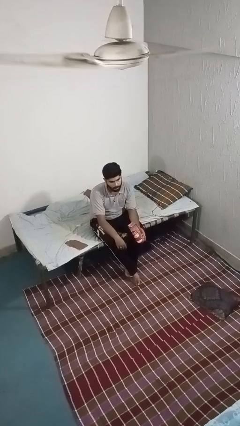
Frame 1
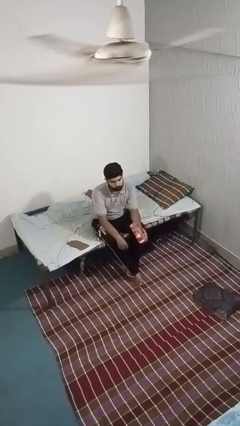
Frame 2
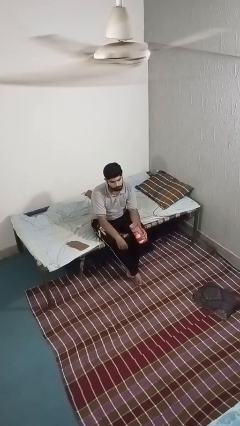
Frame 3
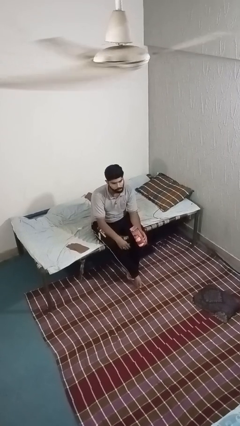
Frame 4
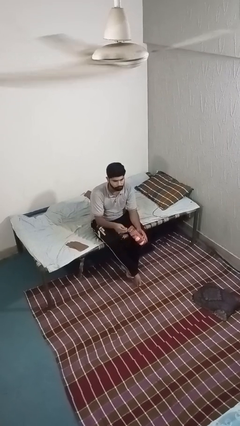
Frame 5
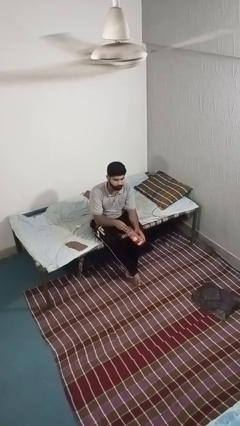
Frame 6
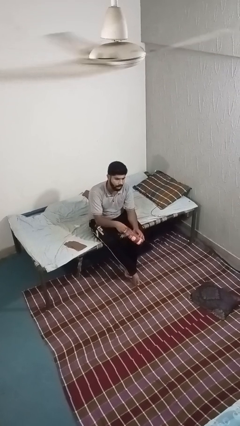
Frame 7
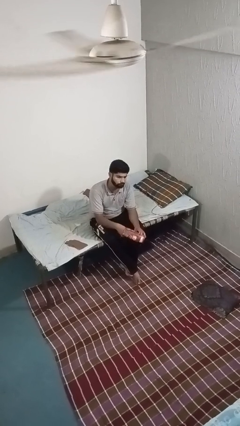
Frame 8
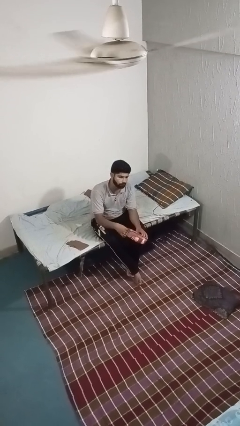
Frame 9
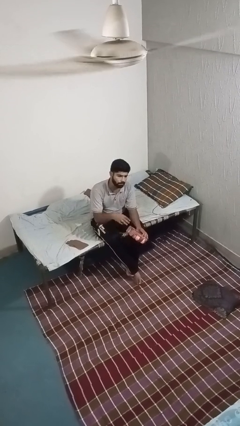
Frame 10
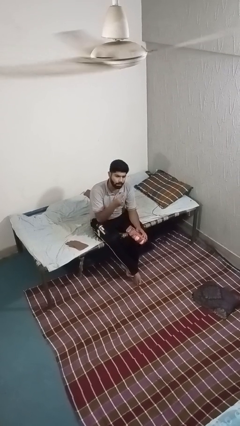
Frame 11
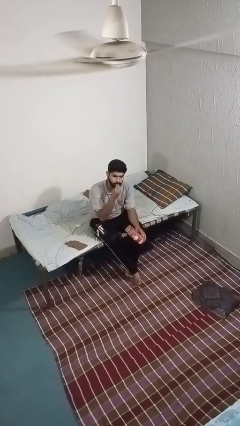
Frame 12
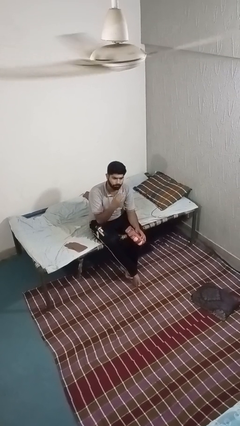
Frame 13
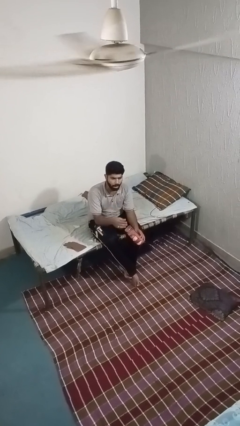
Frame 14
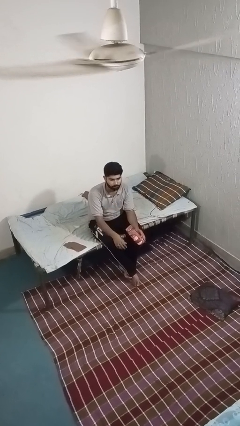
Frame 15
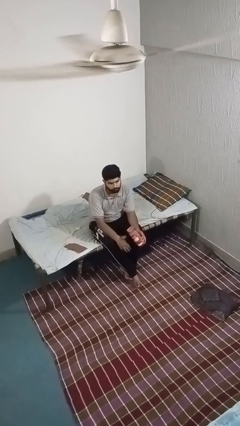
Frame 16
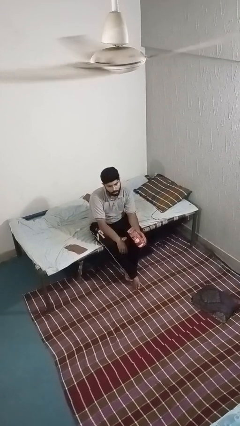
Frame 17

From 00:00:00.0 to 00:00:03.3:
person eats snack from bag

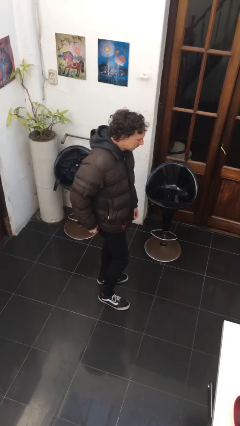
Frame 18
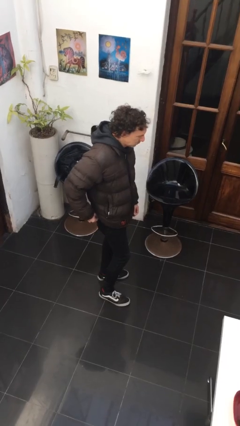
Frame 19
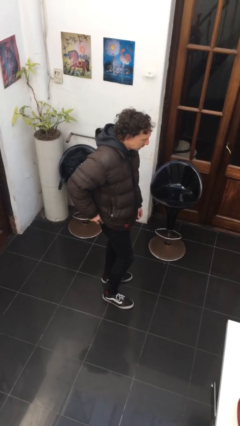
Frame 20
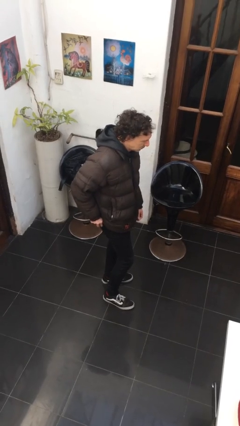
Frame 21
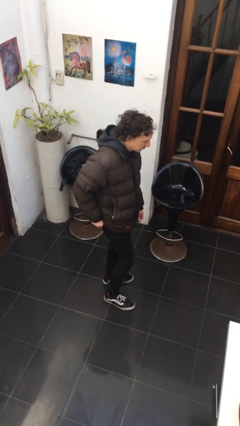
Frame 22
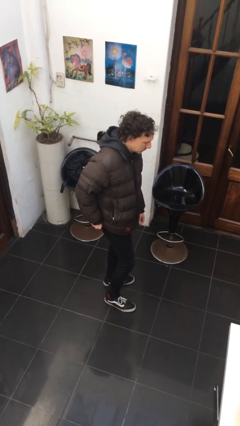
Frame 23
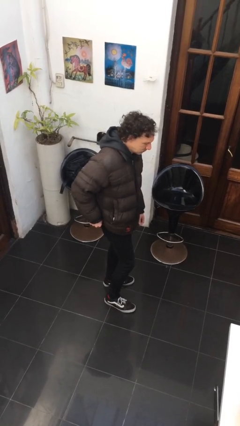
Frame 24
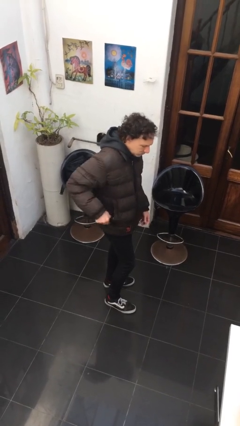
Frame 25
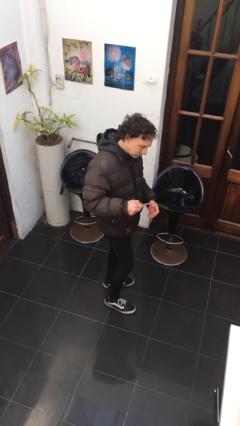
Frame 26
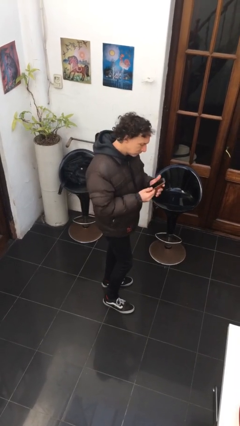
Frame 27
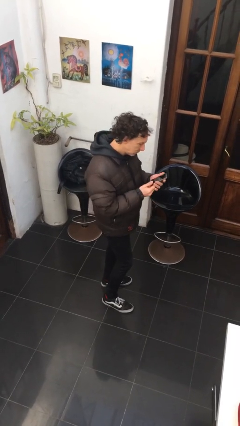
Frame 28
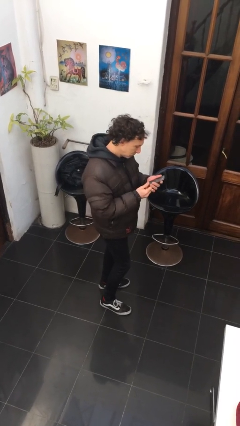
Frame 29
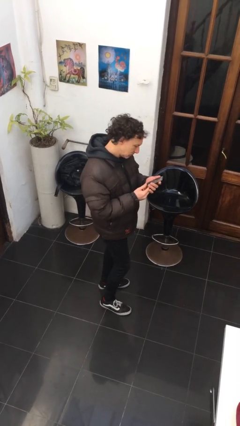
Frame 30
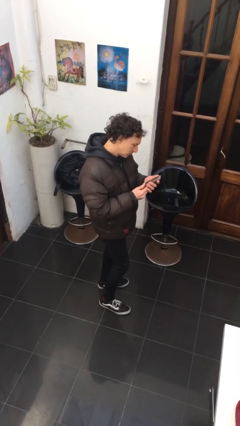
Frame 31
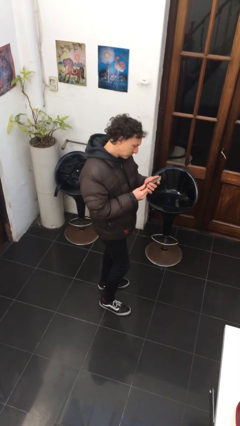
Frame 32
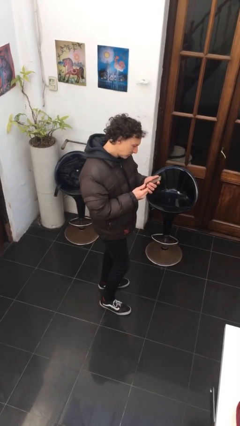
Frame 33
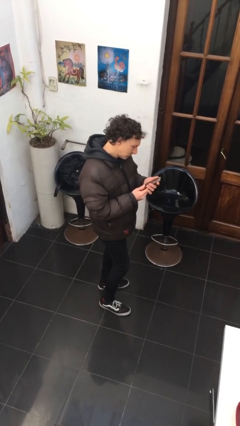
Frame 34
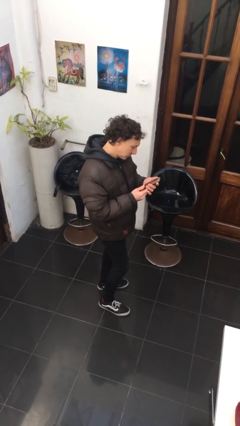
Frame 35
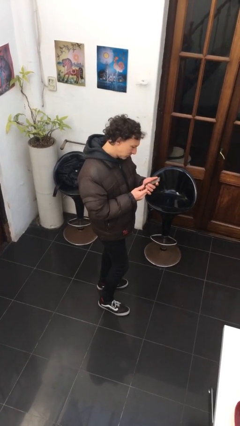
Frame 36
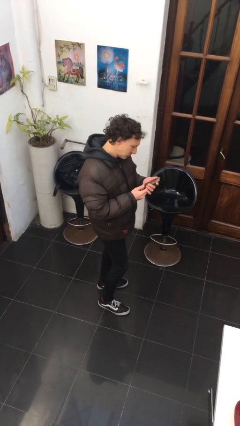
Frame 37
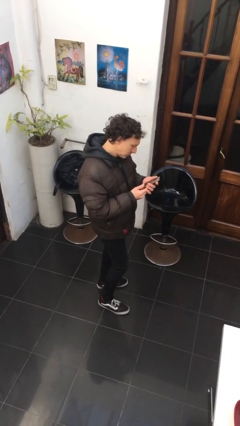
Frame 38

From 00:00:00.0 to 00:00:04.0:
person takes phone from pocket

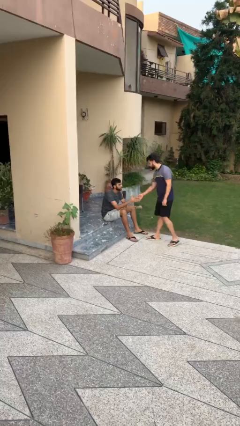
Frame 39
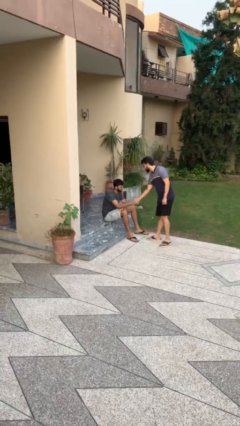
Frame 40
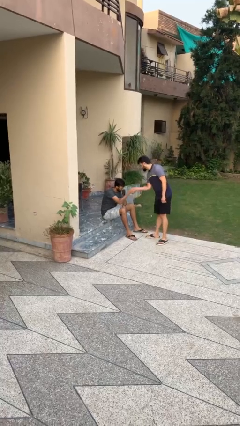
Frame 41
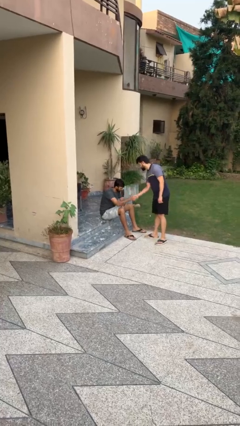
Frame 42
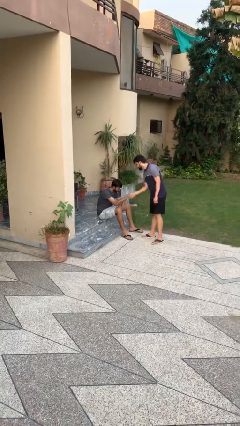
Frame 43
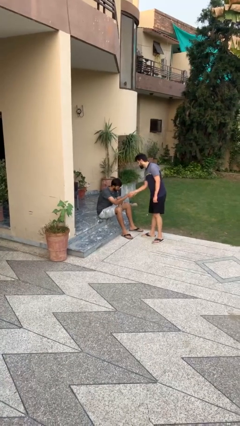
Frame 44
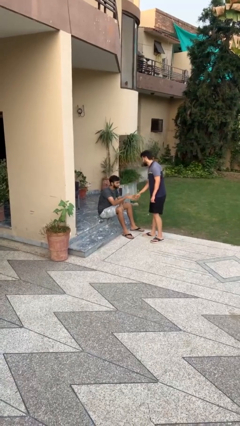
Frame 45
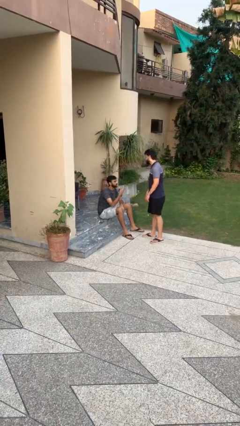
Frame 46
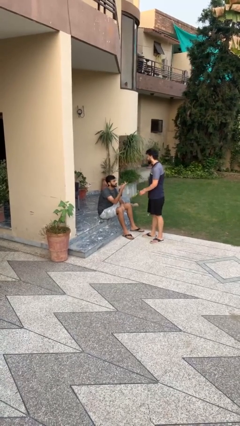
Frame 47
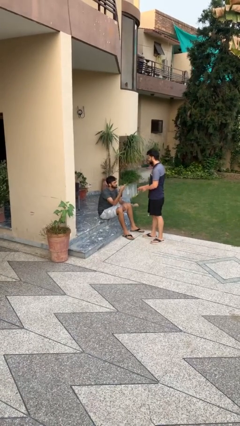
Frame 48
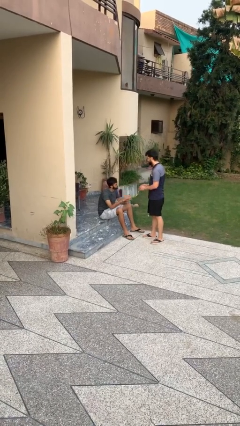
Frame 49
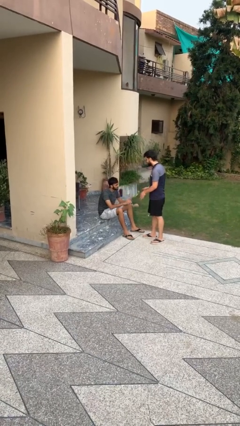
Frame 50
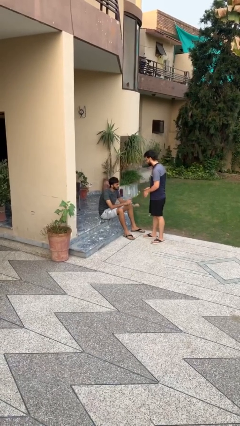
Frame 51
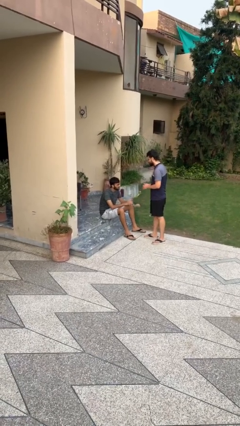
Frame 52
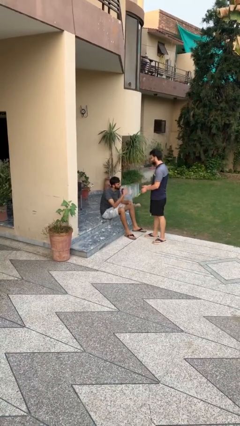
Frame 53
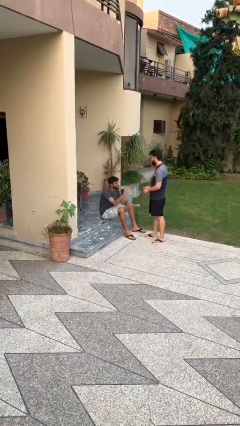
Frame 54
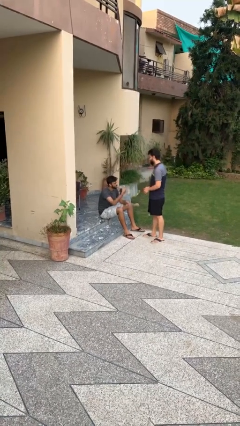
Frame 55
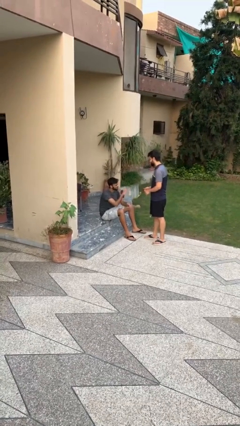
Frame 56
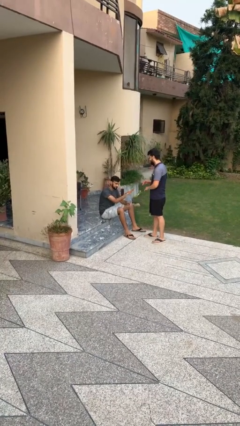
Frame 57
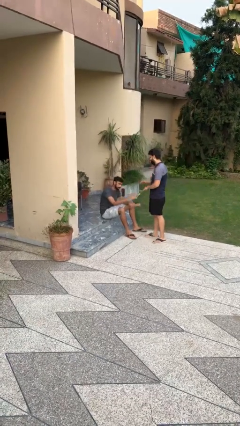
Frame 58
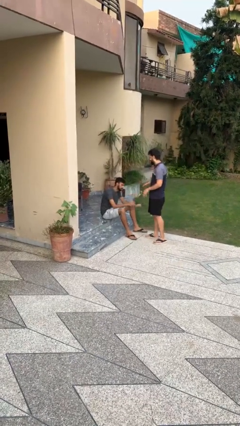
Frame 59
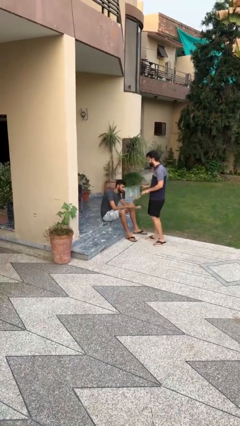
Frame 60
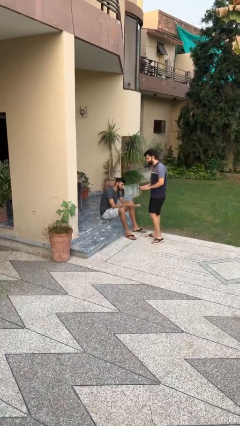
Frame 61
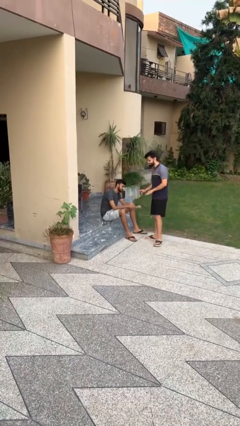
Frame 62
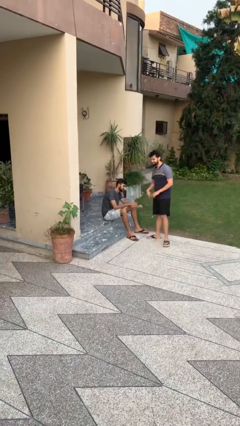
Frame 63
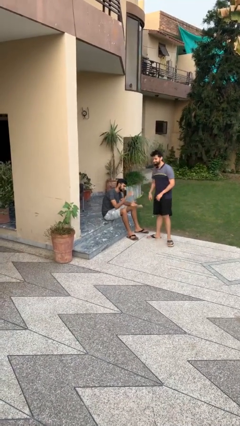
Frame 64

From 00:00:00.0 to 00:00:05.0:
person shakes hand

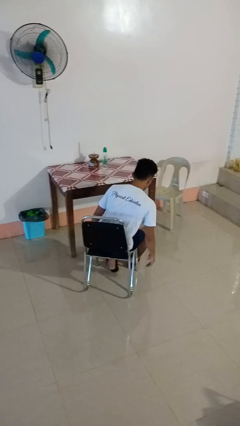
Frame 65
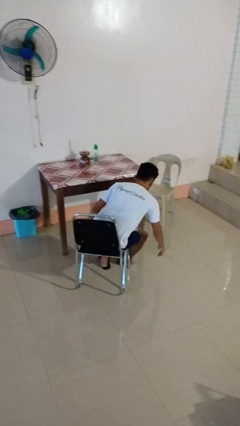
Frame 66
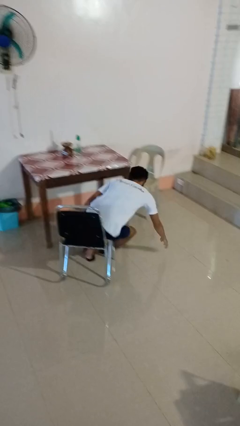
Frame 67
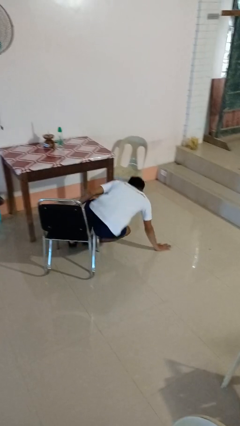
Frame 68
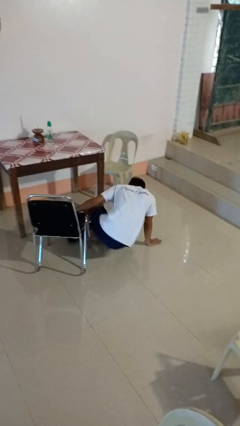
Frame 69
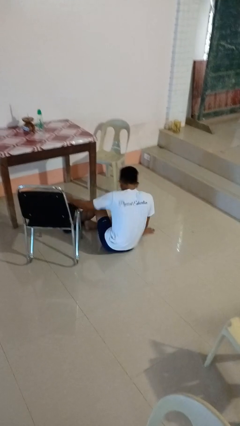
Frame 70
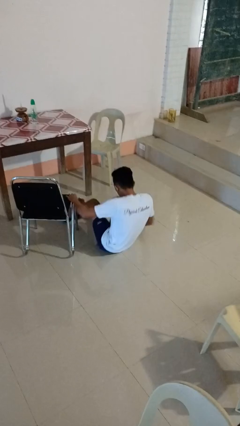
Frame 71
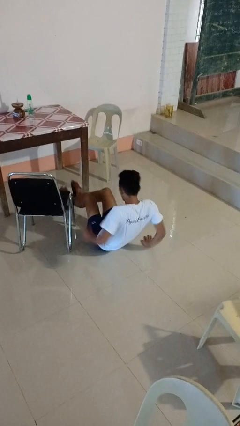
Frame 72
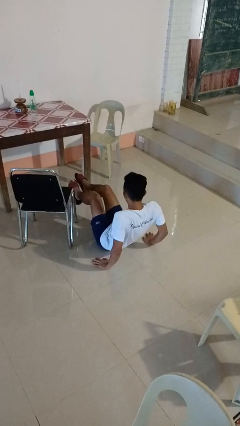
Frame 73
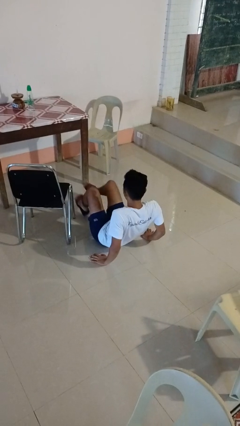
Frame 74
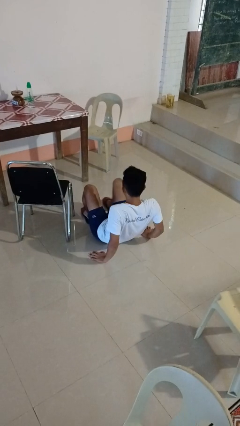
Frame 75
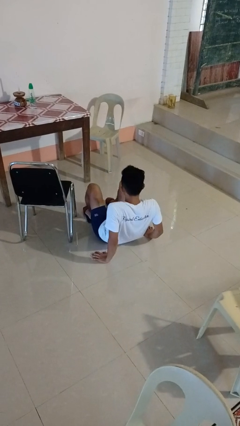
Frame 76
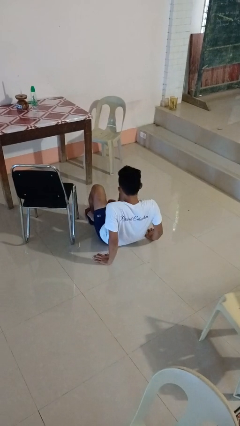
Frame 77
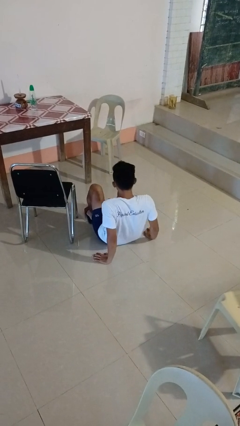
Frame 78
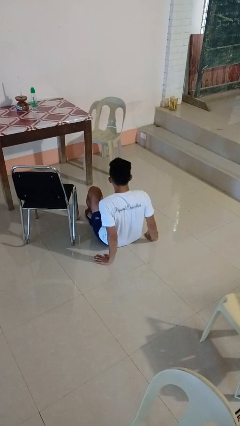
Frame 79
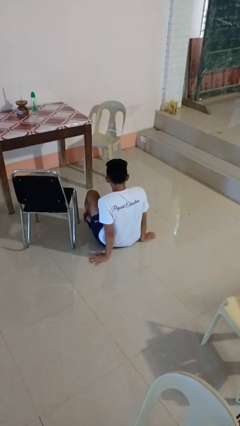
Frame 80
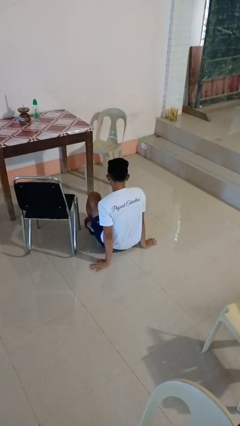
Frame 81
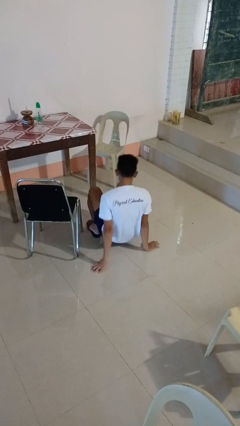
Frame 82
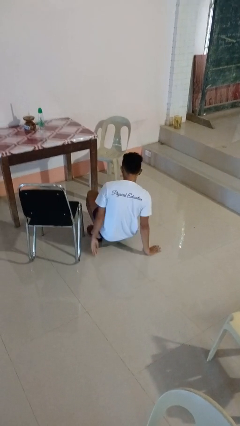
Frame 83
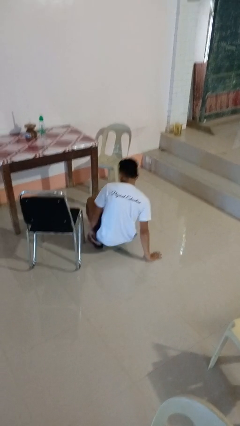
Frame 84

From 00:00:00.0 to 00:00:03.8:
person falls from chair

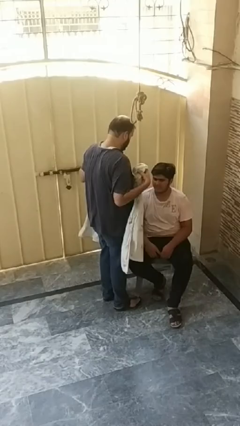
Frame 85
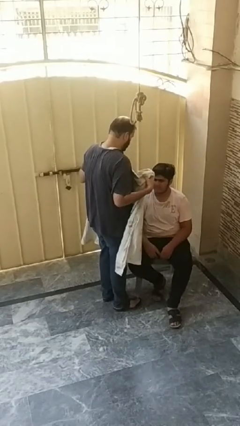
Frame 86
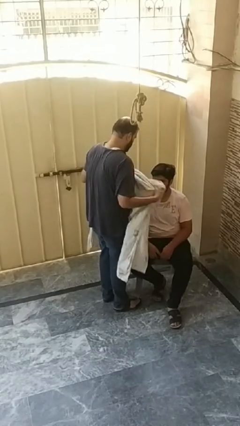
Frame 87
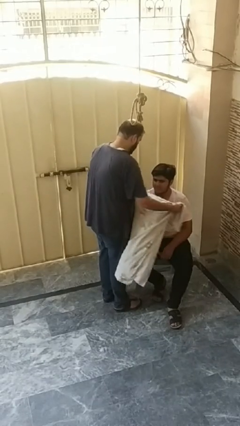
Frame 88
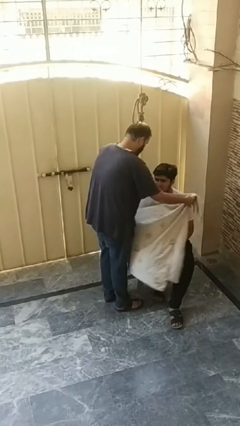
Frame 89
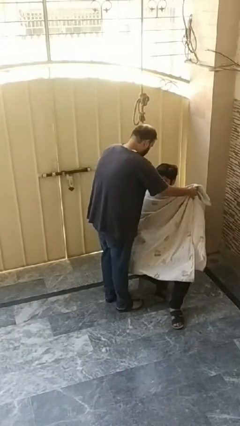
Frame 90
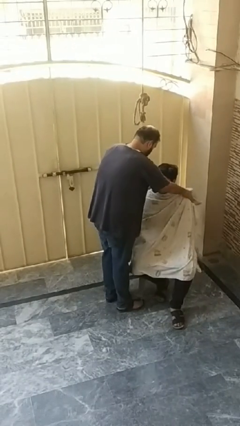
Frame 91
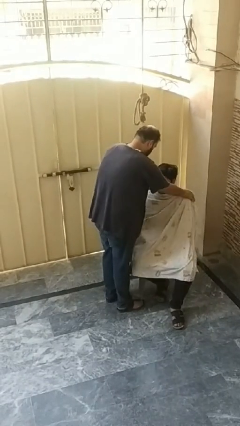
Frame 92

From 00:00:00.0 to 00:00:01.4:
person covers friend with blanket

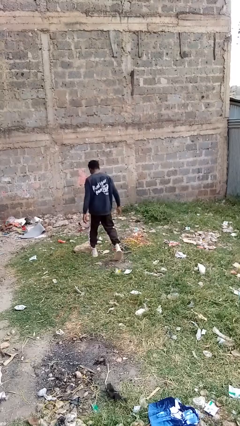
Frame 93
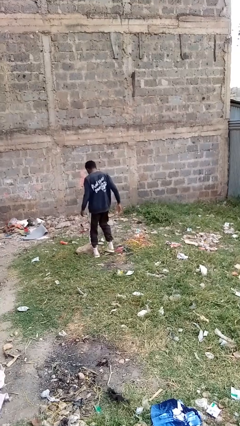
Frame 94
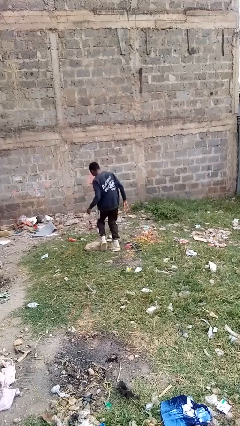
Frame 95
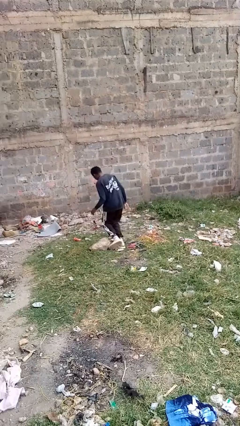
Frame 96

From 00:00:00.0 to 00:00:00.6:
person trips on object on floor
